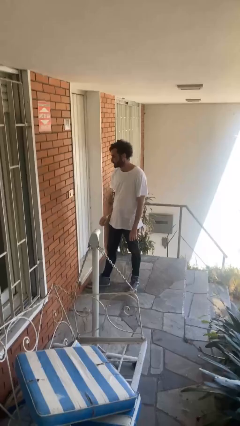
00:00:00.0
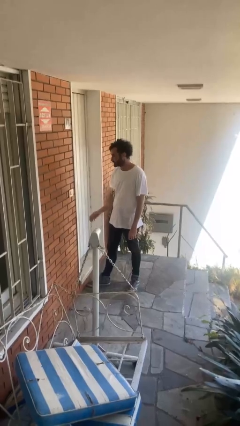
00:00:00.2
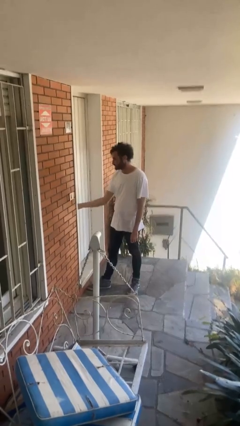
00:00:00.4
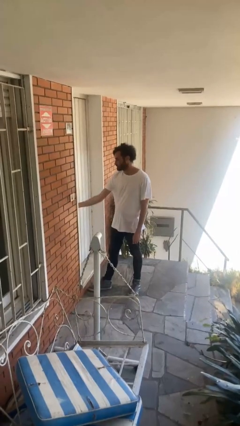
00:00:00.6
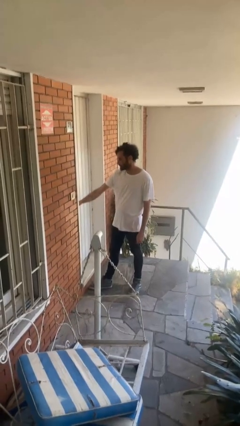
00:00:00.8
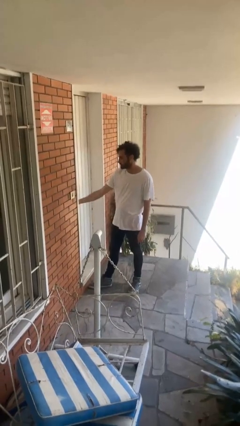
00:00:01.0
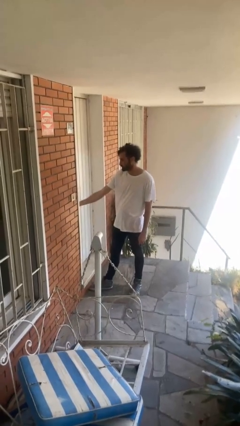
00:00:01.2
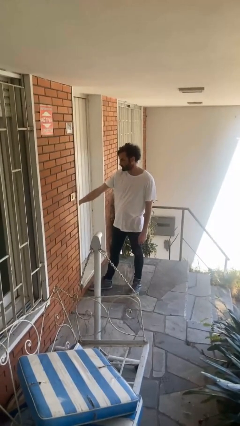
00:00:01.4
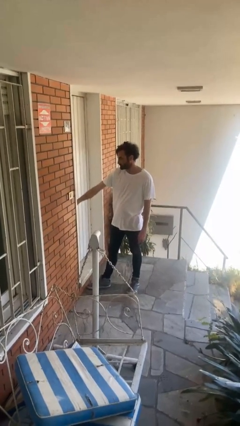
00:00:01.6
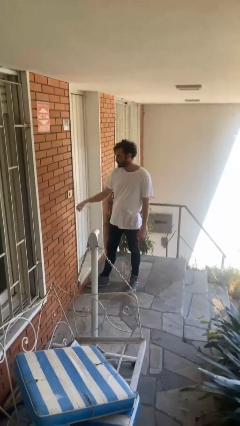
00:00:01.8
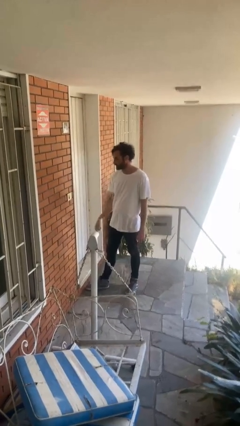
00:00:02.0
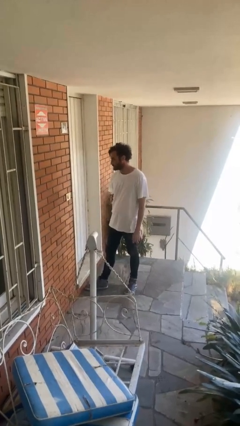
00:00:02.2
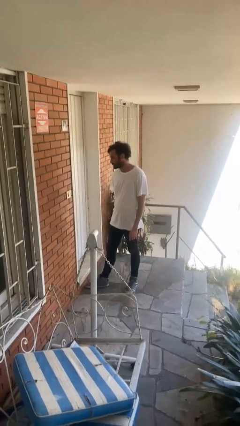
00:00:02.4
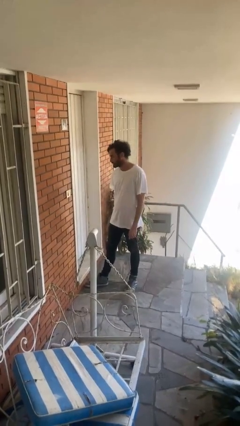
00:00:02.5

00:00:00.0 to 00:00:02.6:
person locks door with keys

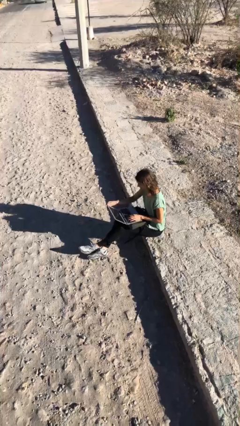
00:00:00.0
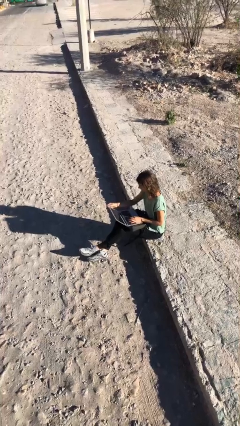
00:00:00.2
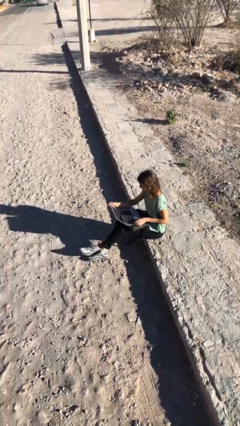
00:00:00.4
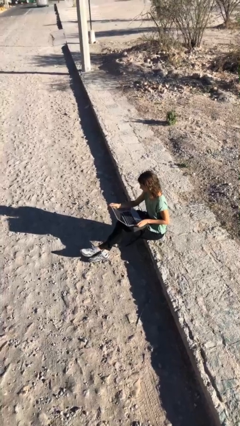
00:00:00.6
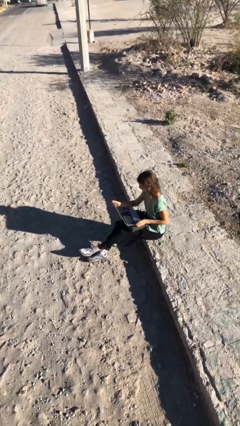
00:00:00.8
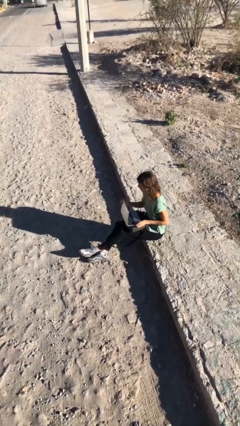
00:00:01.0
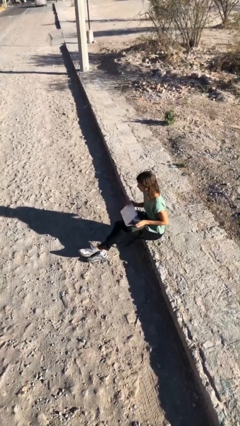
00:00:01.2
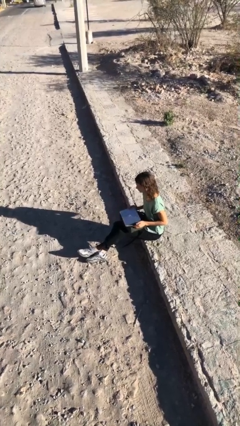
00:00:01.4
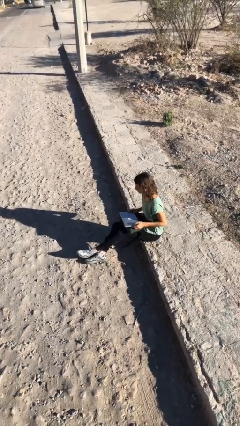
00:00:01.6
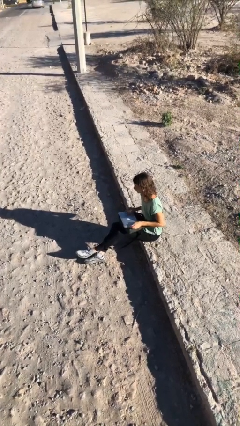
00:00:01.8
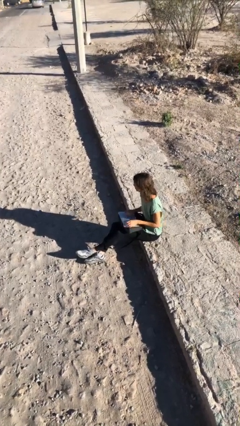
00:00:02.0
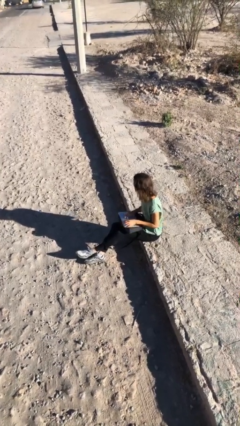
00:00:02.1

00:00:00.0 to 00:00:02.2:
person interacts with laptop

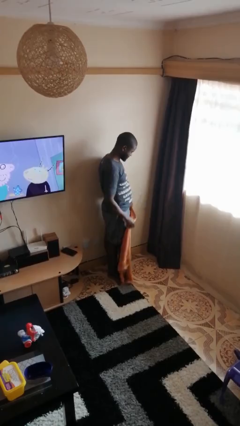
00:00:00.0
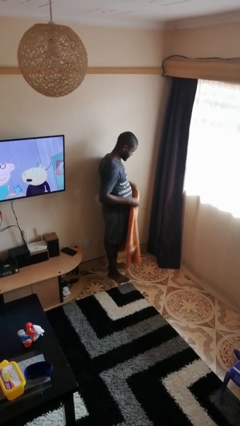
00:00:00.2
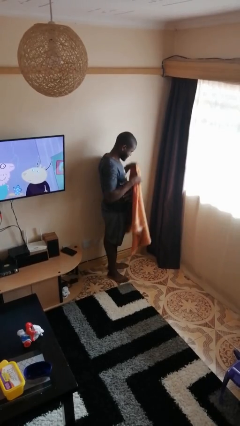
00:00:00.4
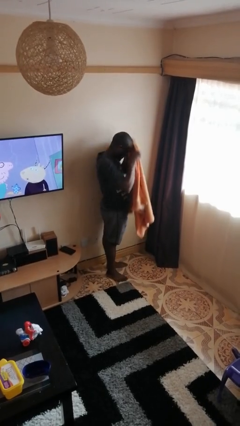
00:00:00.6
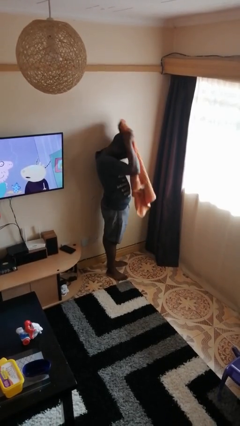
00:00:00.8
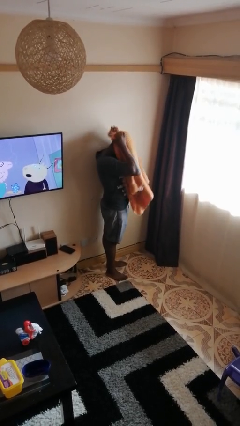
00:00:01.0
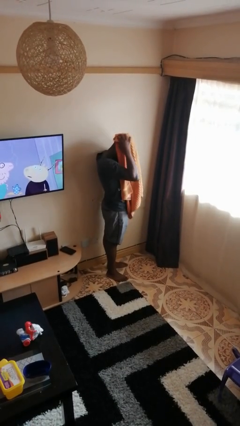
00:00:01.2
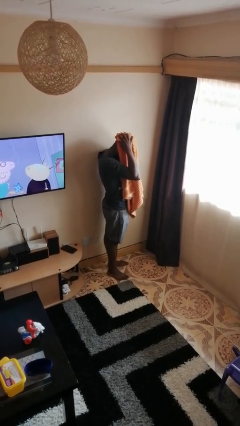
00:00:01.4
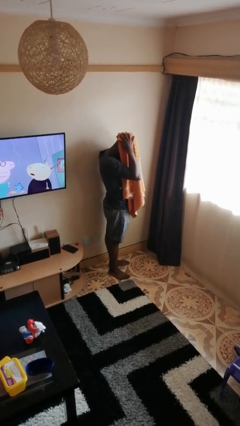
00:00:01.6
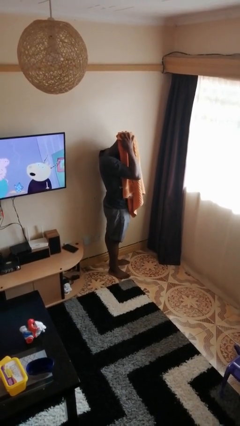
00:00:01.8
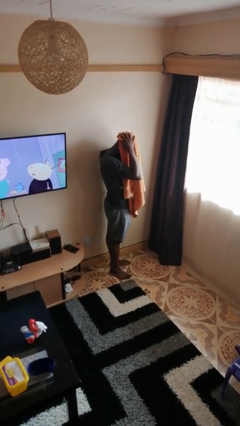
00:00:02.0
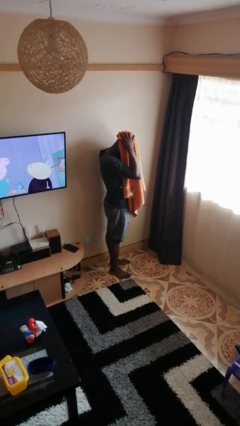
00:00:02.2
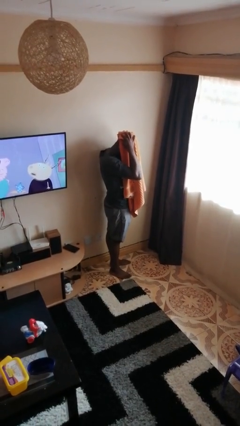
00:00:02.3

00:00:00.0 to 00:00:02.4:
person dries hair with towel

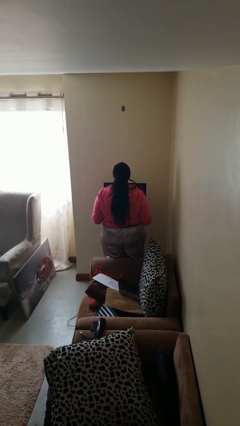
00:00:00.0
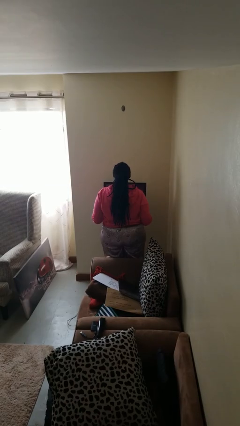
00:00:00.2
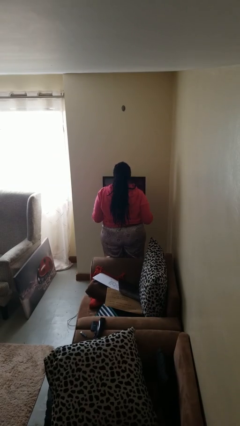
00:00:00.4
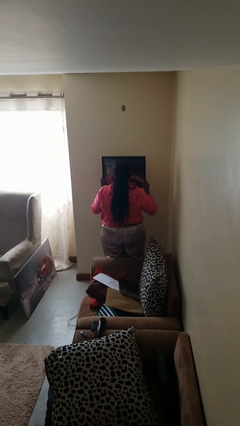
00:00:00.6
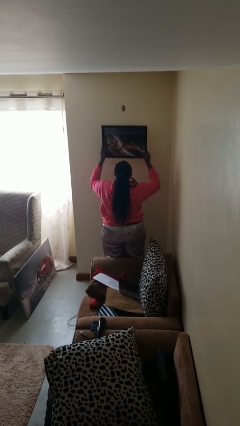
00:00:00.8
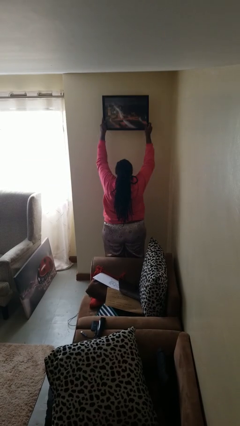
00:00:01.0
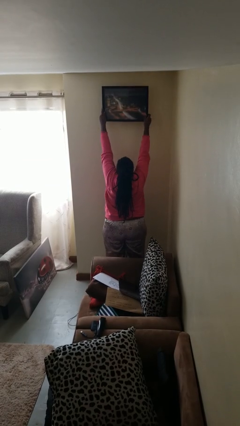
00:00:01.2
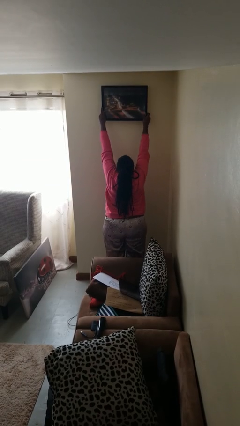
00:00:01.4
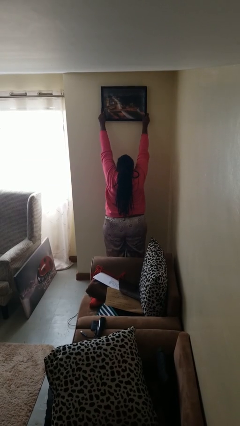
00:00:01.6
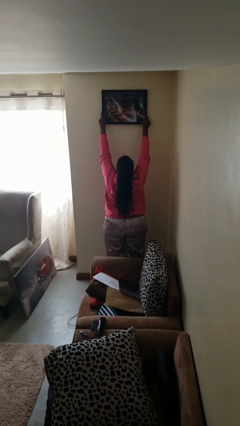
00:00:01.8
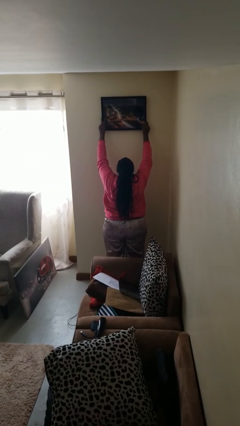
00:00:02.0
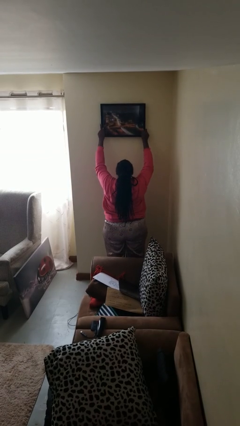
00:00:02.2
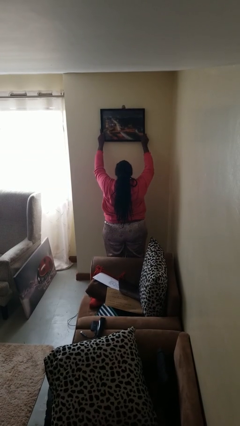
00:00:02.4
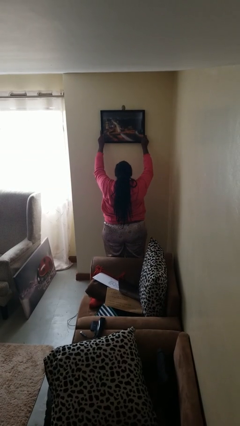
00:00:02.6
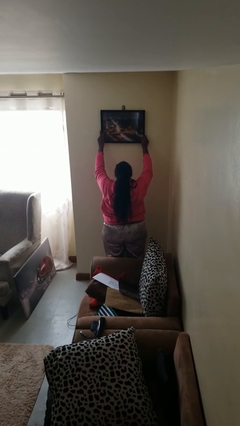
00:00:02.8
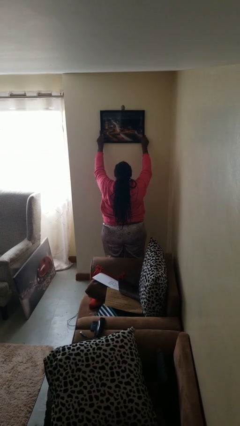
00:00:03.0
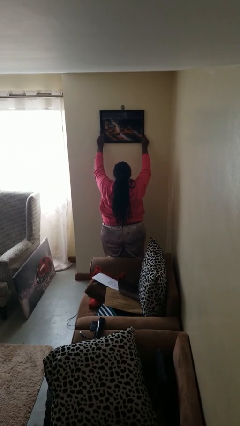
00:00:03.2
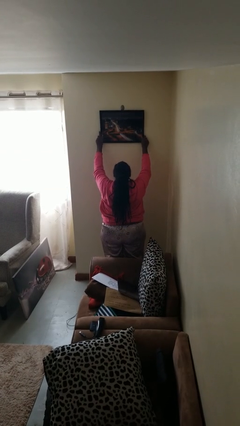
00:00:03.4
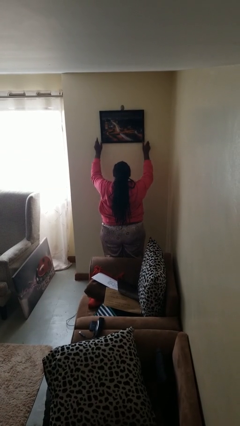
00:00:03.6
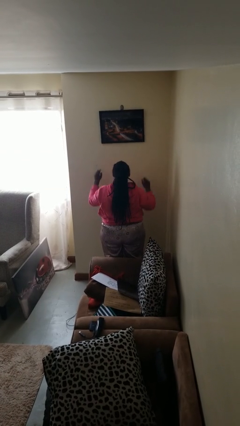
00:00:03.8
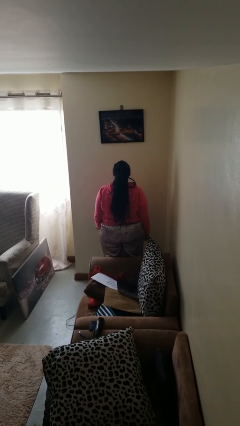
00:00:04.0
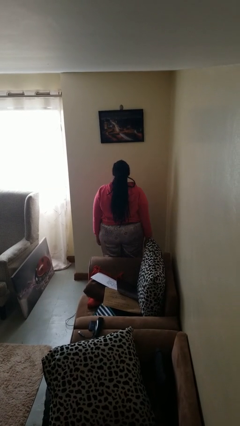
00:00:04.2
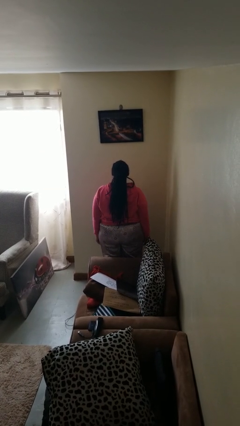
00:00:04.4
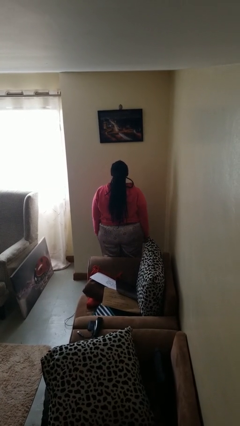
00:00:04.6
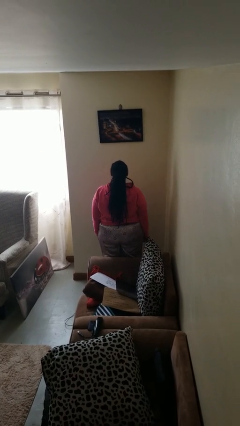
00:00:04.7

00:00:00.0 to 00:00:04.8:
person puts up picture frame

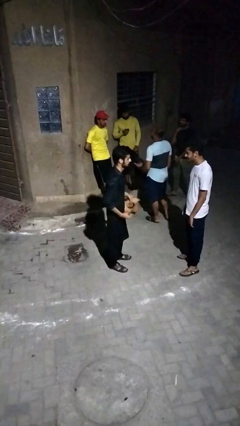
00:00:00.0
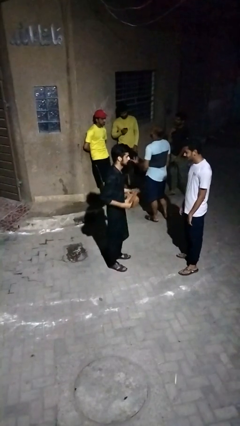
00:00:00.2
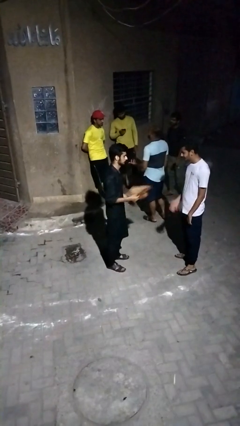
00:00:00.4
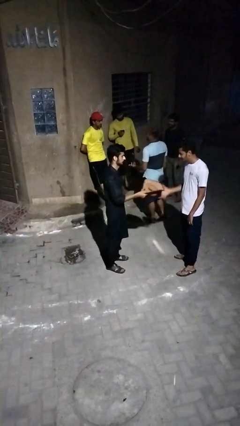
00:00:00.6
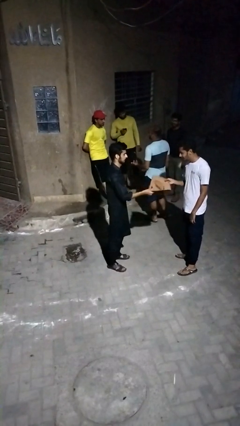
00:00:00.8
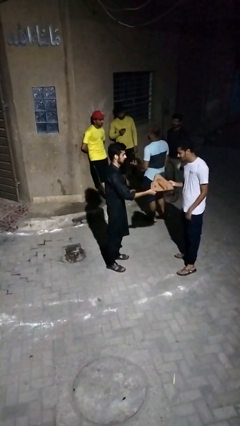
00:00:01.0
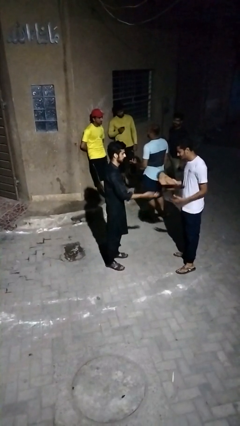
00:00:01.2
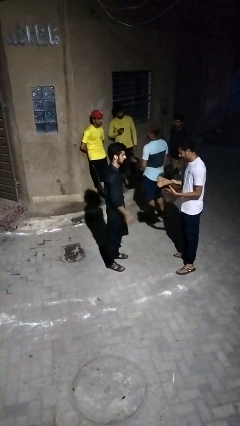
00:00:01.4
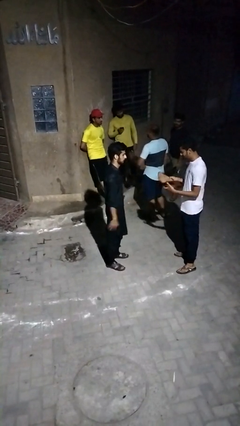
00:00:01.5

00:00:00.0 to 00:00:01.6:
person transfers object to person

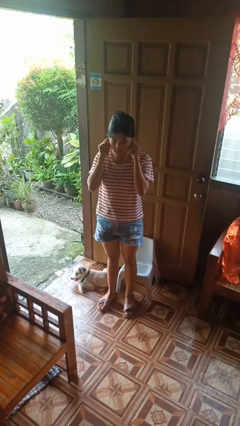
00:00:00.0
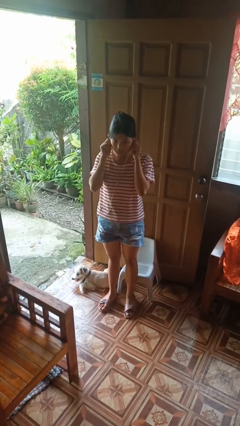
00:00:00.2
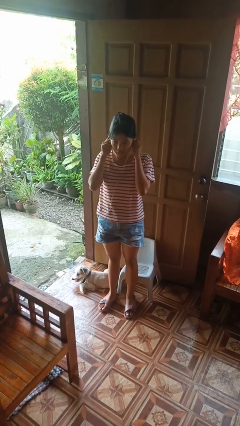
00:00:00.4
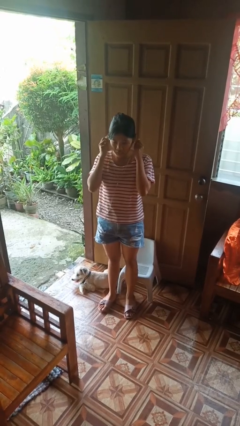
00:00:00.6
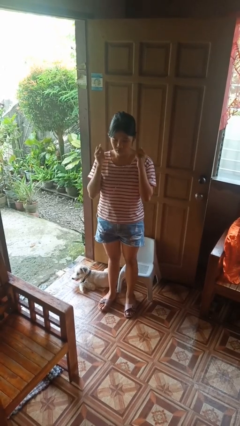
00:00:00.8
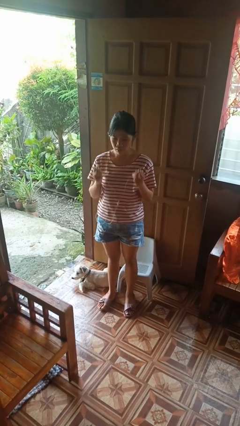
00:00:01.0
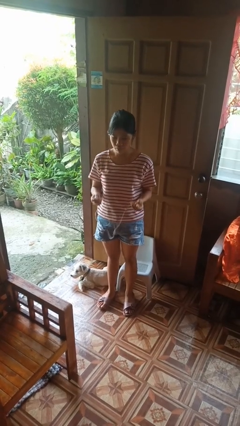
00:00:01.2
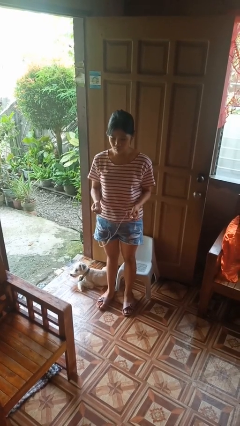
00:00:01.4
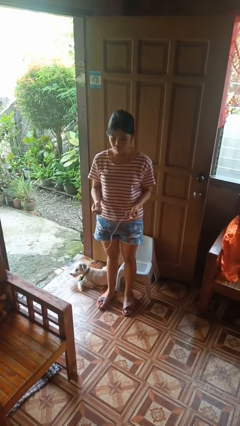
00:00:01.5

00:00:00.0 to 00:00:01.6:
person takes off headphones

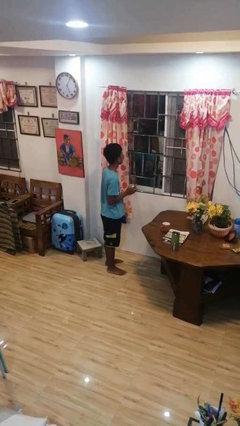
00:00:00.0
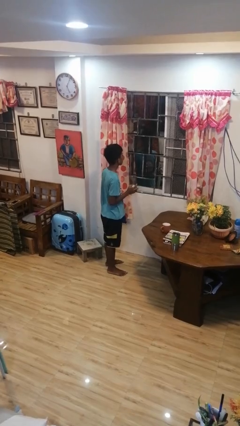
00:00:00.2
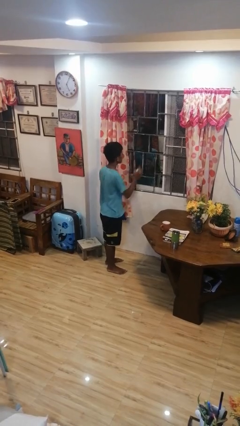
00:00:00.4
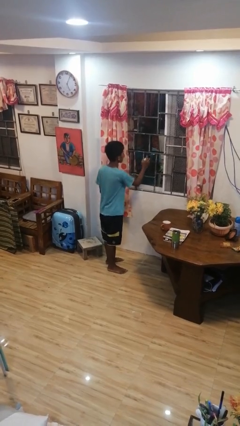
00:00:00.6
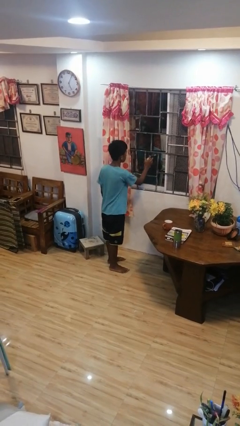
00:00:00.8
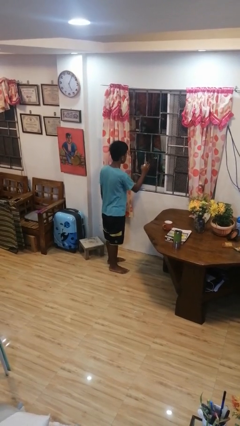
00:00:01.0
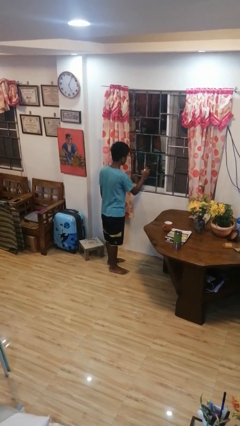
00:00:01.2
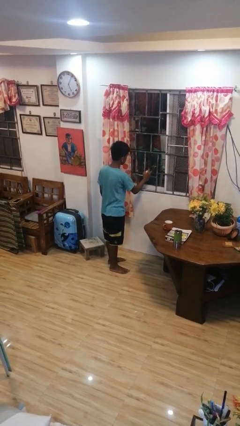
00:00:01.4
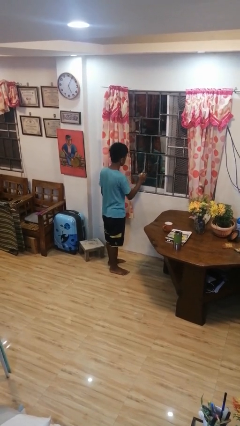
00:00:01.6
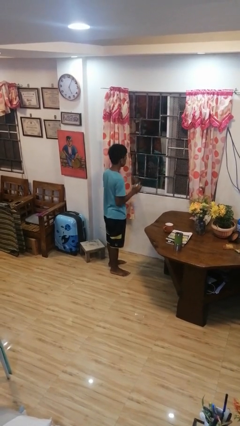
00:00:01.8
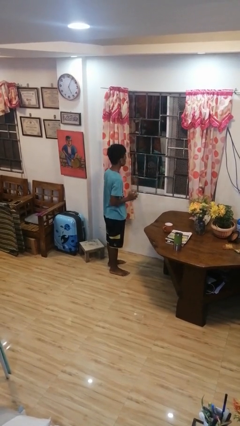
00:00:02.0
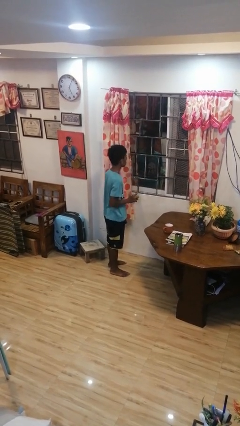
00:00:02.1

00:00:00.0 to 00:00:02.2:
person sprays from bottle
